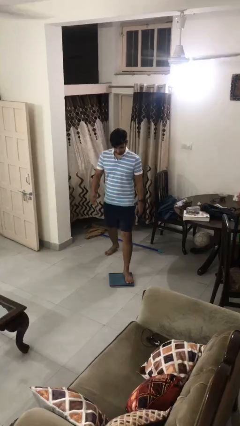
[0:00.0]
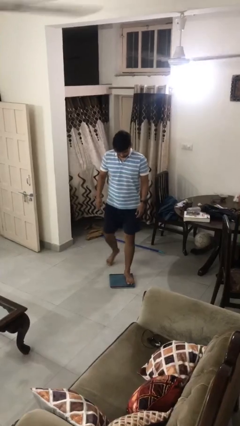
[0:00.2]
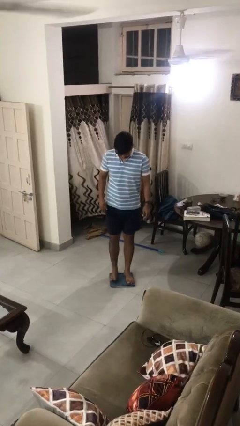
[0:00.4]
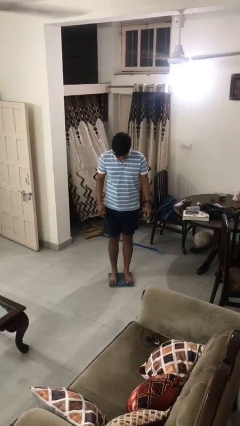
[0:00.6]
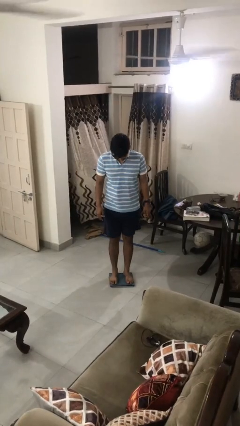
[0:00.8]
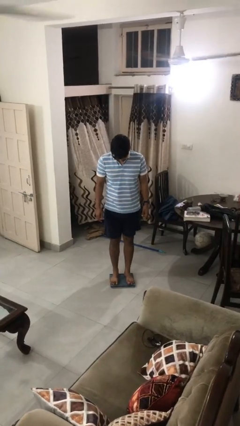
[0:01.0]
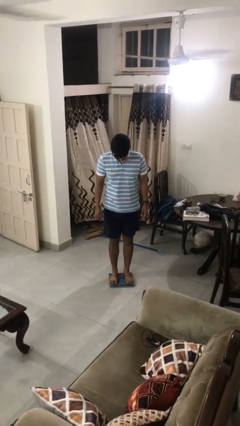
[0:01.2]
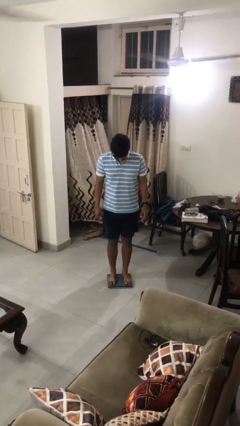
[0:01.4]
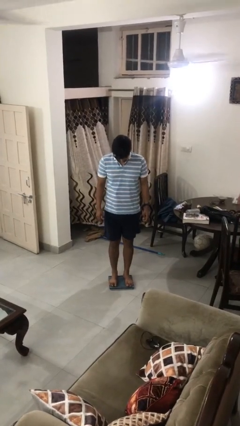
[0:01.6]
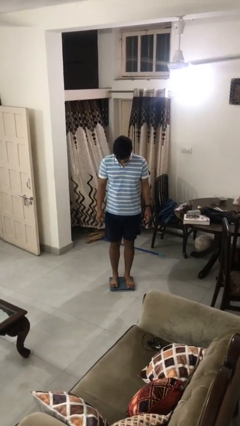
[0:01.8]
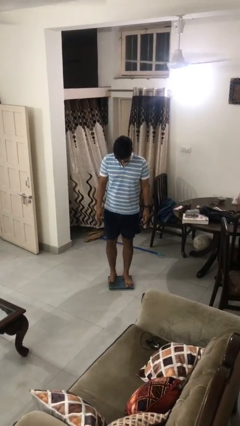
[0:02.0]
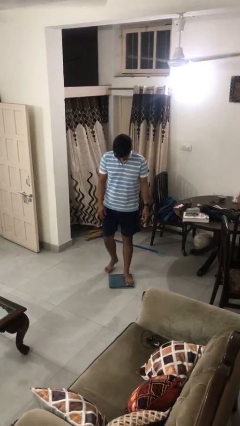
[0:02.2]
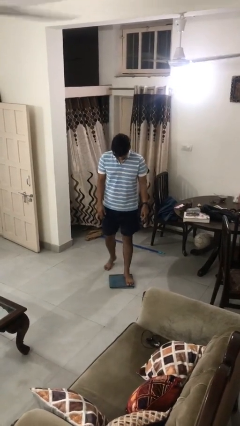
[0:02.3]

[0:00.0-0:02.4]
person uses bodyweight scale

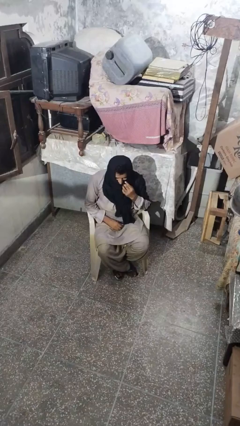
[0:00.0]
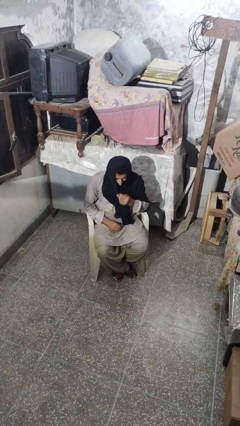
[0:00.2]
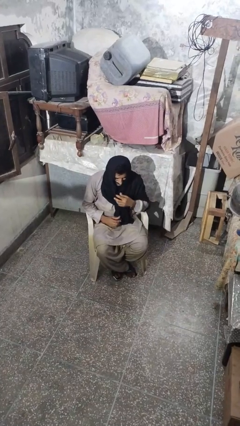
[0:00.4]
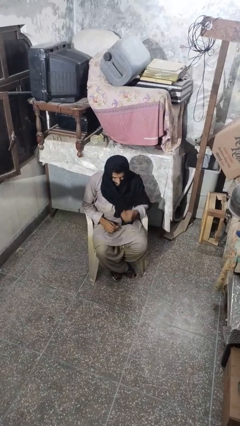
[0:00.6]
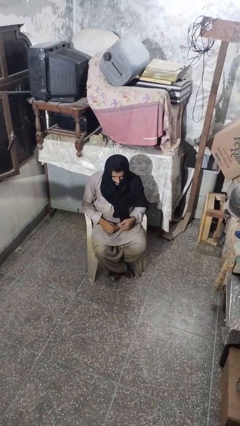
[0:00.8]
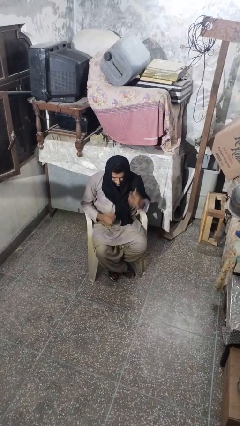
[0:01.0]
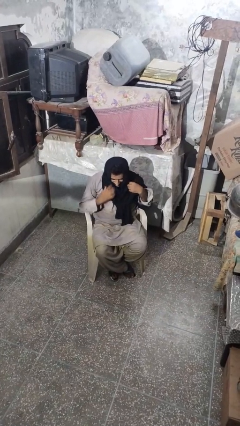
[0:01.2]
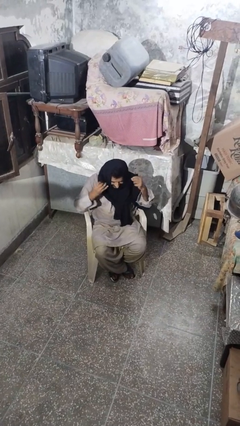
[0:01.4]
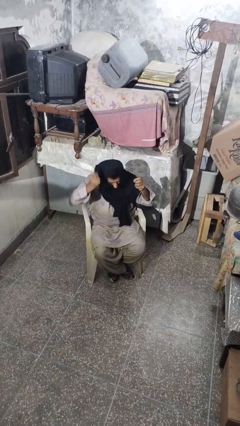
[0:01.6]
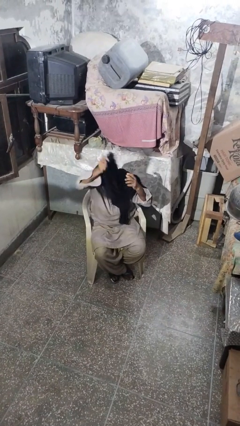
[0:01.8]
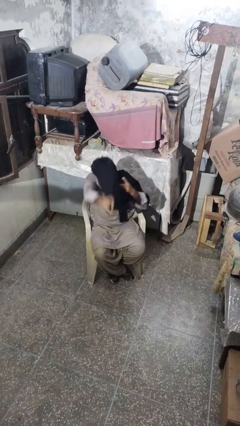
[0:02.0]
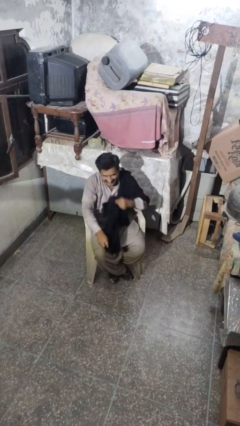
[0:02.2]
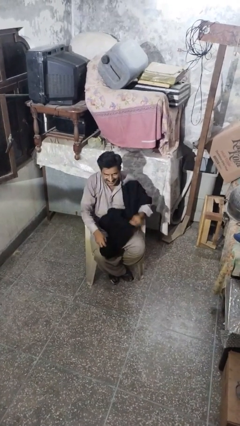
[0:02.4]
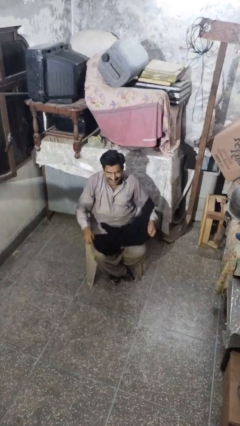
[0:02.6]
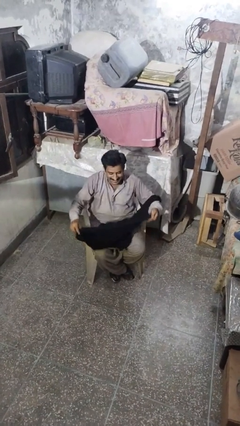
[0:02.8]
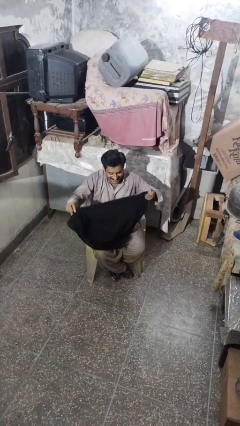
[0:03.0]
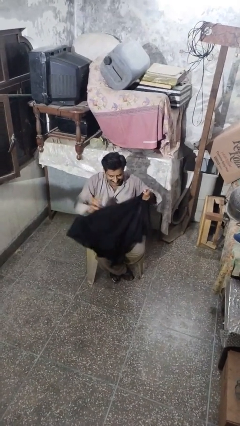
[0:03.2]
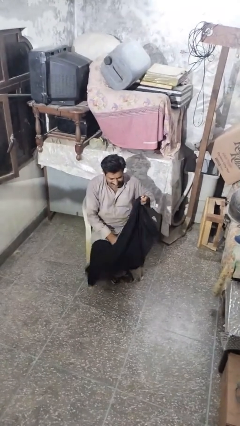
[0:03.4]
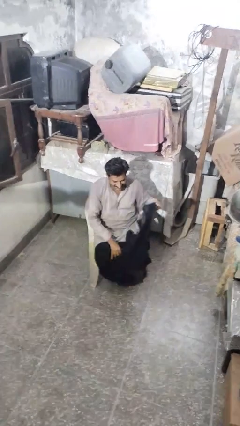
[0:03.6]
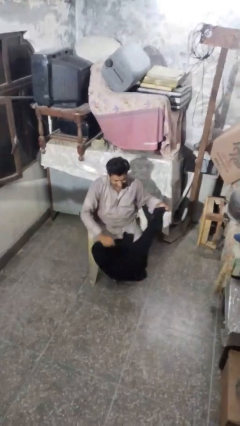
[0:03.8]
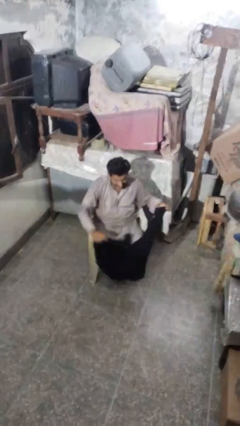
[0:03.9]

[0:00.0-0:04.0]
person takes off scarf

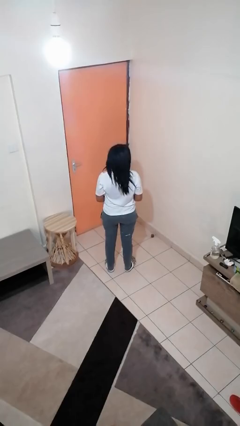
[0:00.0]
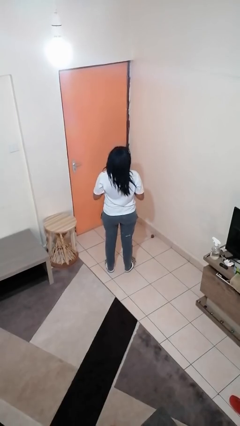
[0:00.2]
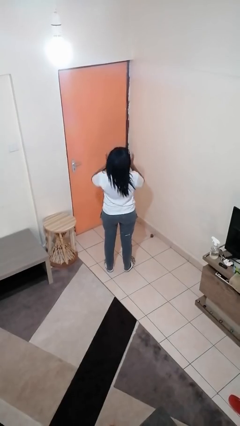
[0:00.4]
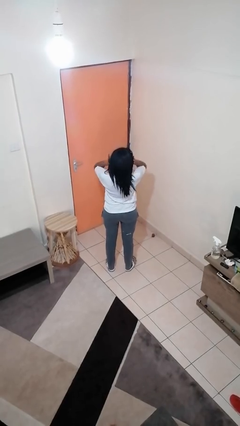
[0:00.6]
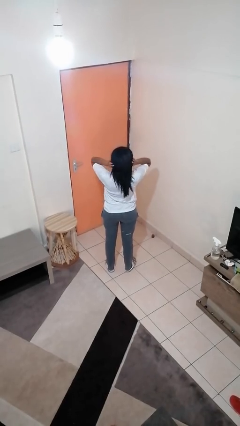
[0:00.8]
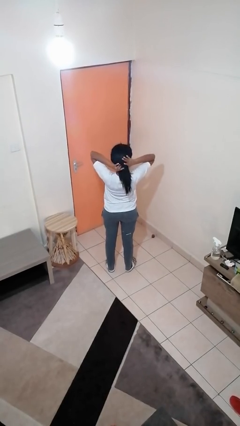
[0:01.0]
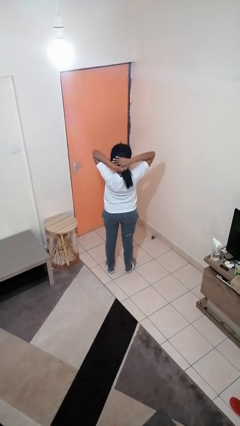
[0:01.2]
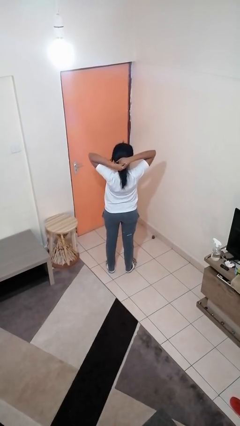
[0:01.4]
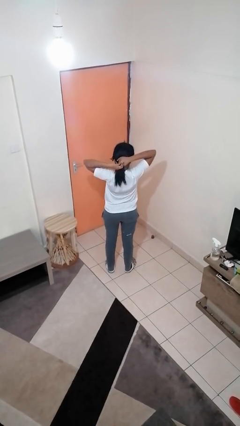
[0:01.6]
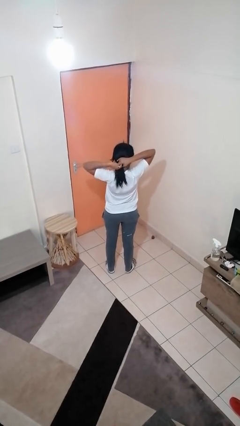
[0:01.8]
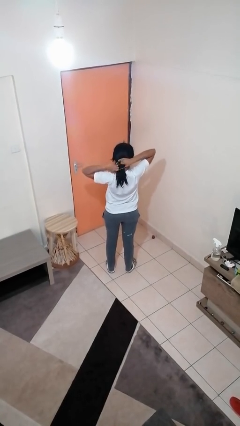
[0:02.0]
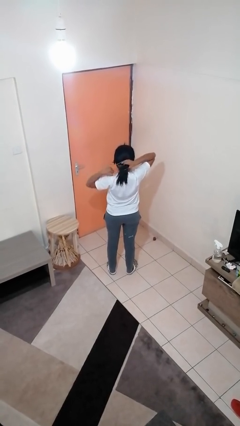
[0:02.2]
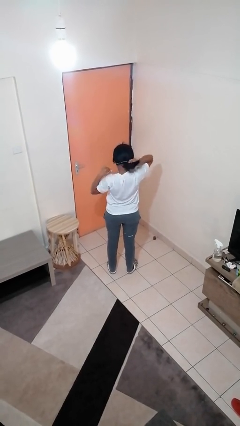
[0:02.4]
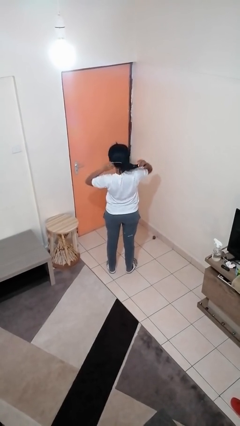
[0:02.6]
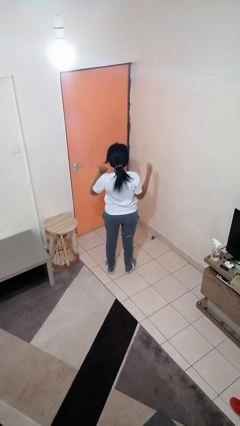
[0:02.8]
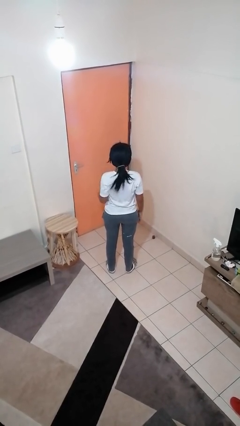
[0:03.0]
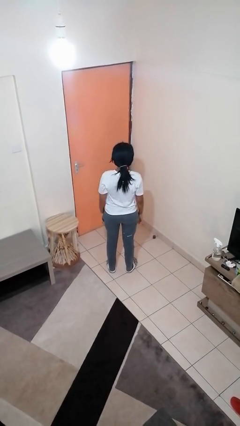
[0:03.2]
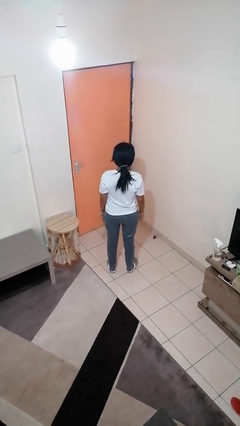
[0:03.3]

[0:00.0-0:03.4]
person puts hair in ponytail

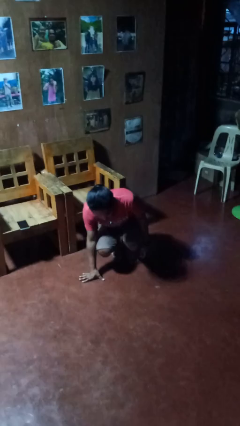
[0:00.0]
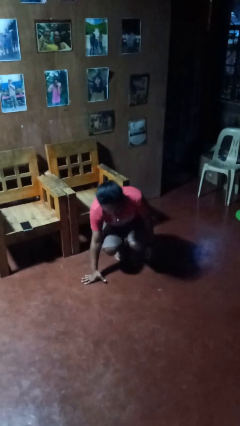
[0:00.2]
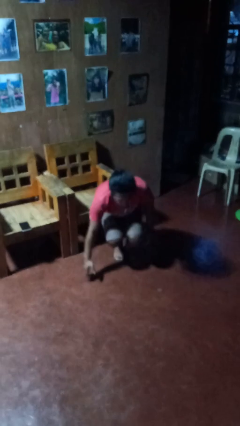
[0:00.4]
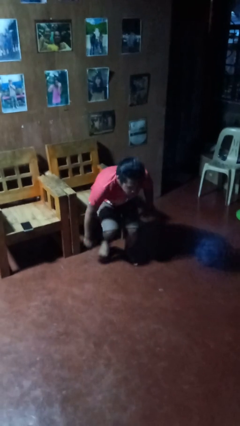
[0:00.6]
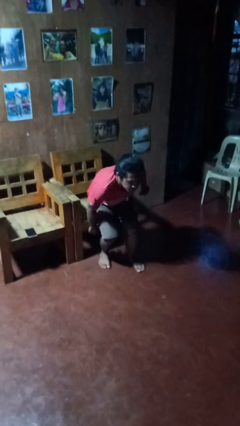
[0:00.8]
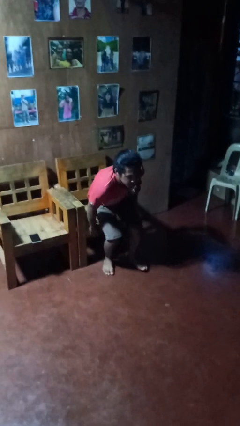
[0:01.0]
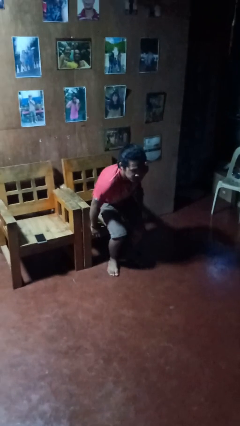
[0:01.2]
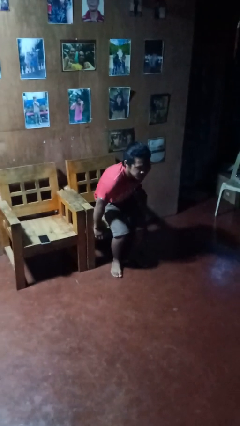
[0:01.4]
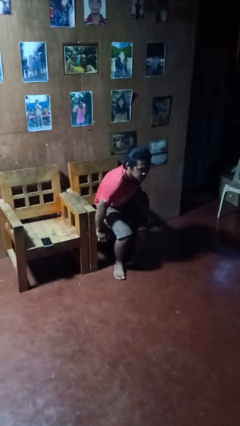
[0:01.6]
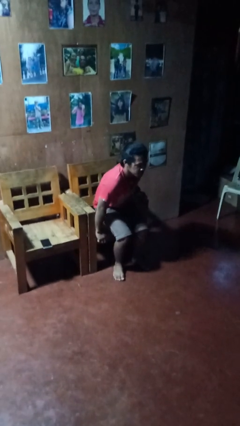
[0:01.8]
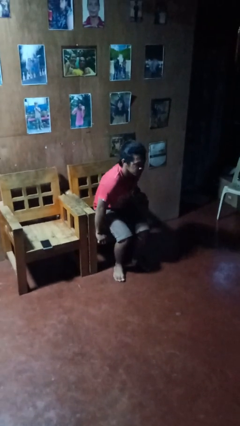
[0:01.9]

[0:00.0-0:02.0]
person stands up from floor

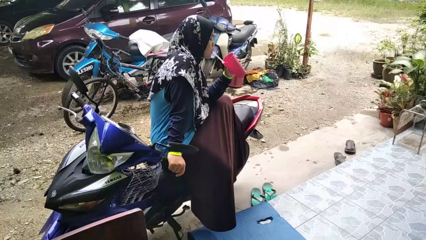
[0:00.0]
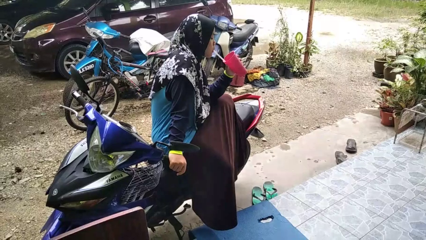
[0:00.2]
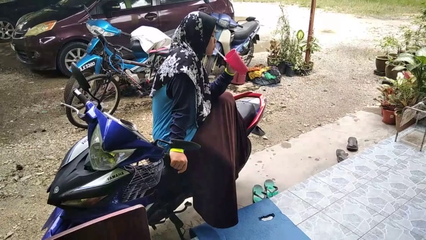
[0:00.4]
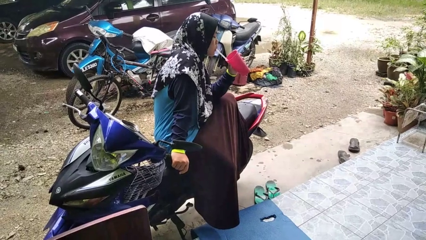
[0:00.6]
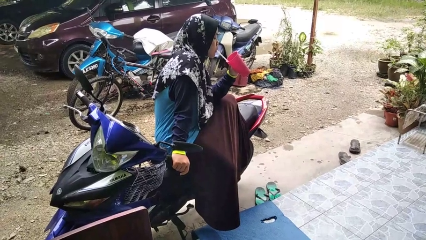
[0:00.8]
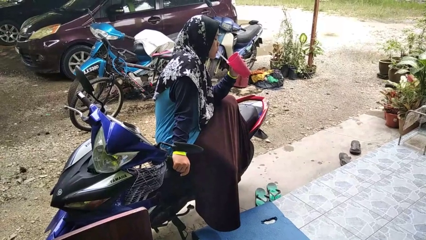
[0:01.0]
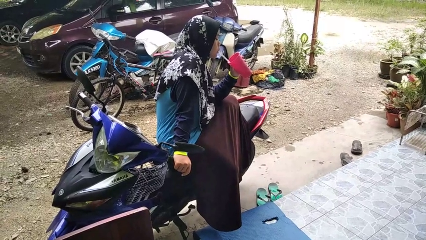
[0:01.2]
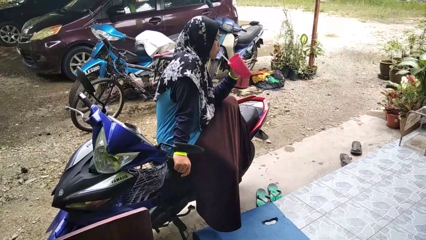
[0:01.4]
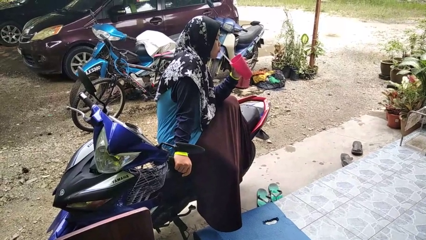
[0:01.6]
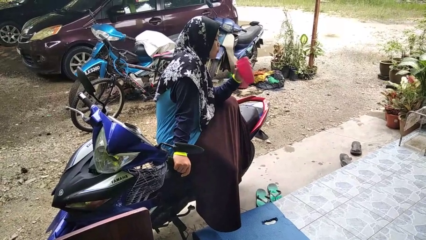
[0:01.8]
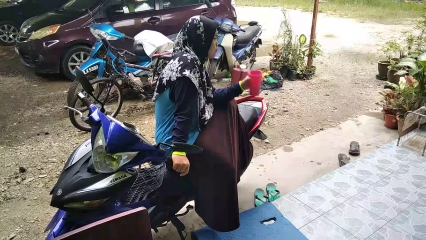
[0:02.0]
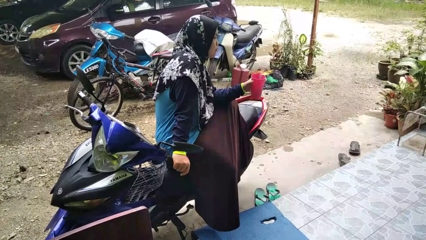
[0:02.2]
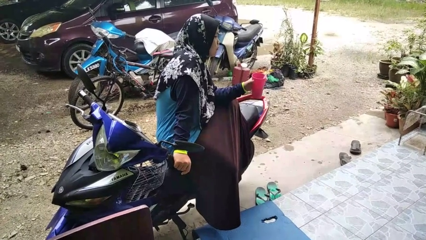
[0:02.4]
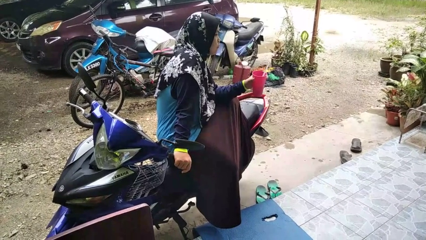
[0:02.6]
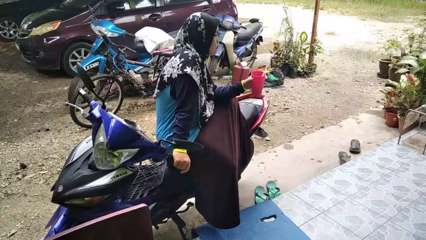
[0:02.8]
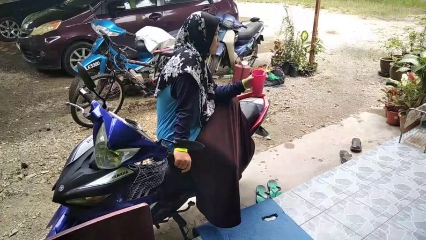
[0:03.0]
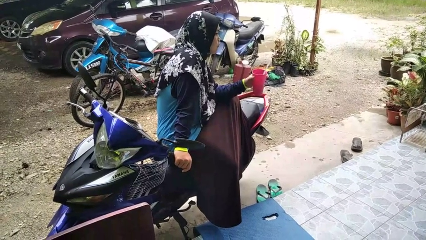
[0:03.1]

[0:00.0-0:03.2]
person drinks from straw

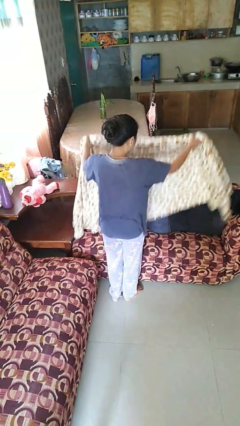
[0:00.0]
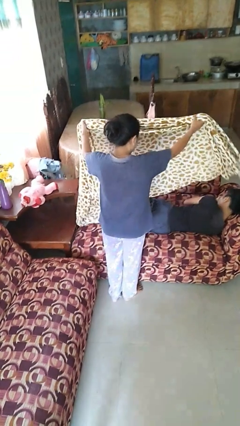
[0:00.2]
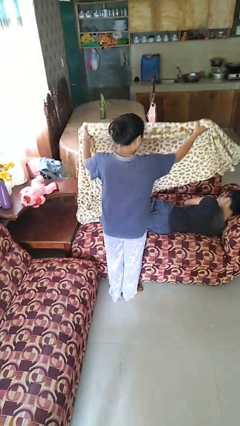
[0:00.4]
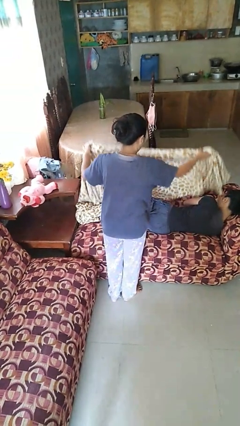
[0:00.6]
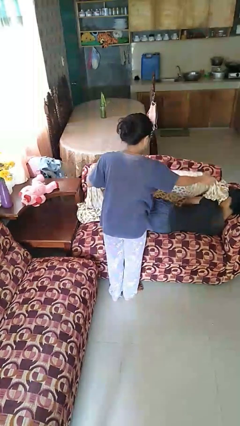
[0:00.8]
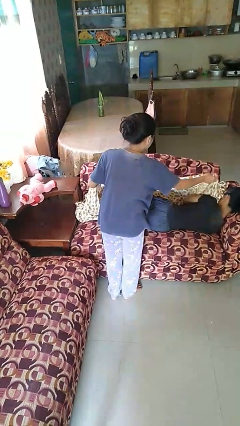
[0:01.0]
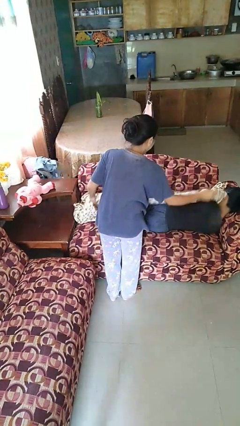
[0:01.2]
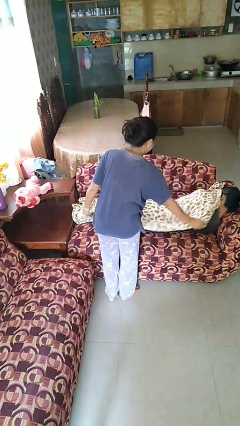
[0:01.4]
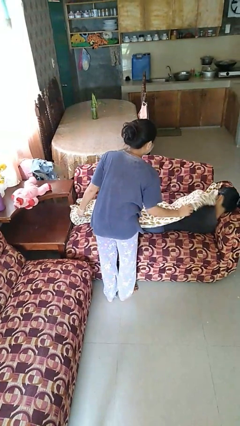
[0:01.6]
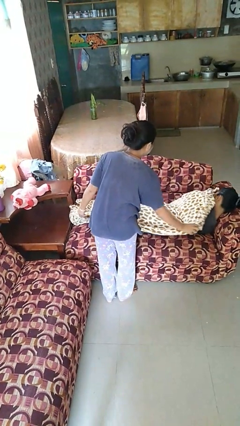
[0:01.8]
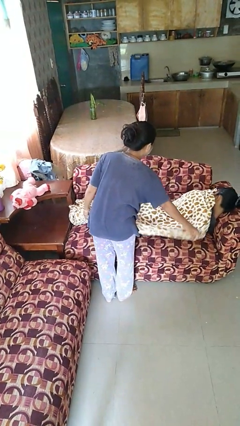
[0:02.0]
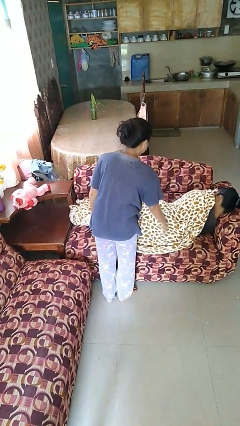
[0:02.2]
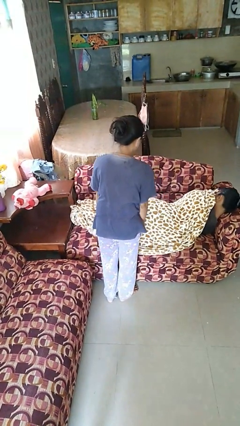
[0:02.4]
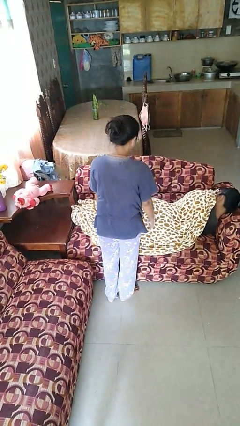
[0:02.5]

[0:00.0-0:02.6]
person covers friend with blanket
